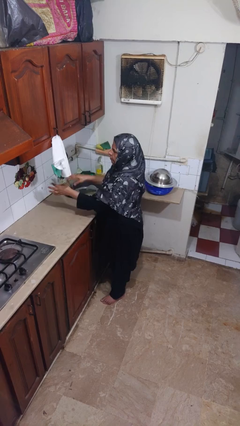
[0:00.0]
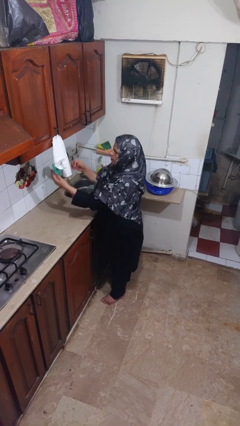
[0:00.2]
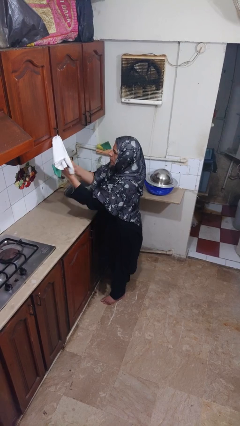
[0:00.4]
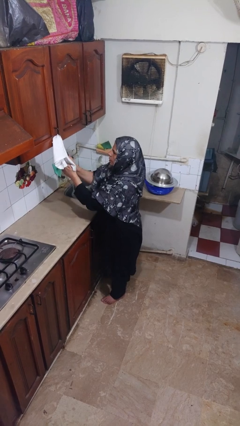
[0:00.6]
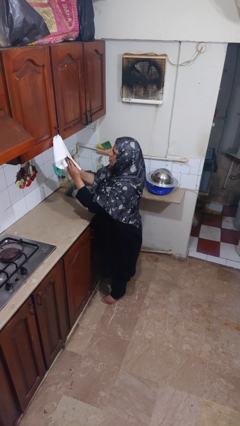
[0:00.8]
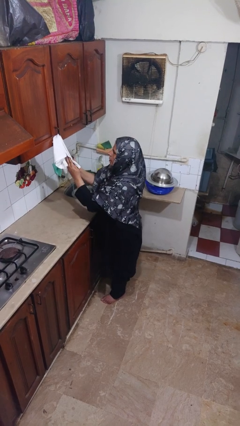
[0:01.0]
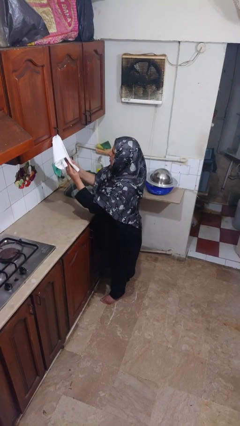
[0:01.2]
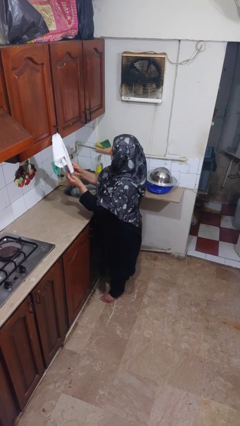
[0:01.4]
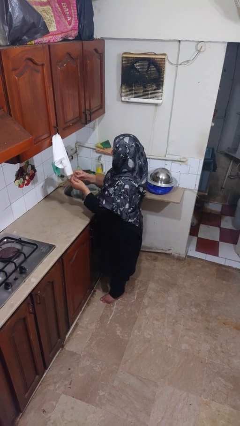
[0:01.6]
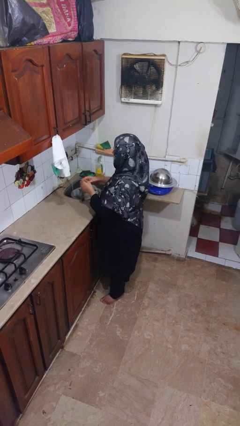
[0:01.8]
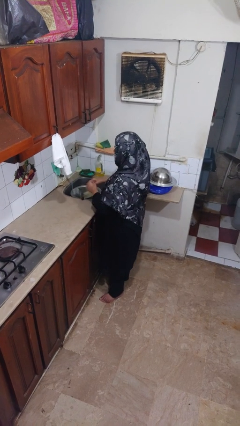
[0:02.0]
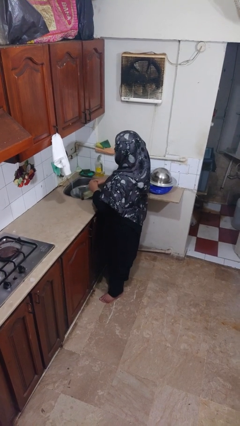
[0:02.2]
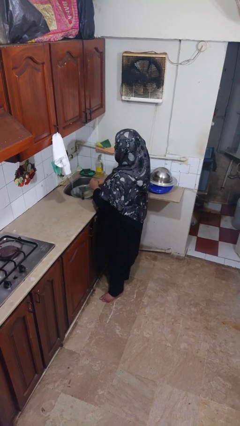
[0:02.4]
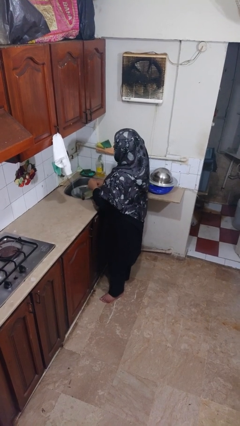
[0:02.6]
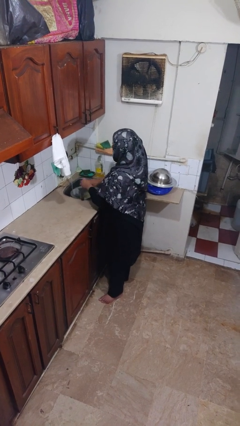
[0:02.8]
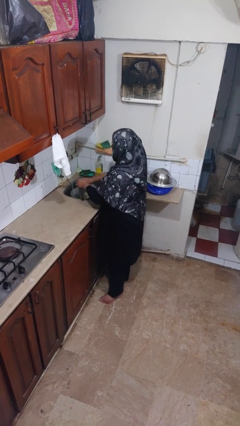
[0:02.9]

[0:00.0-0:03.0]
person dries hands with towel

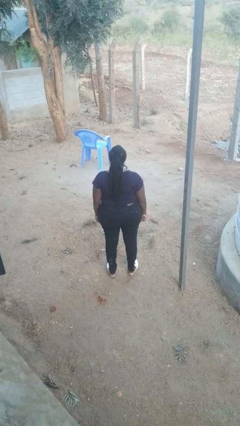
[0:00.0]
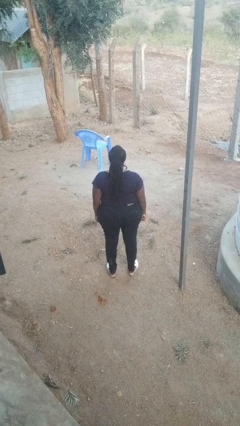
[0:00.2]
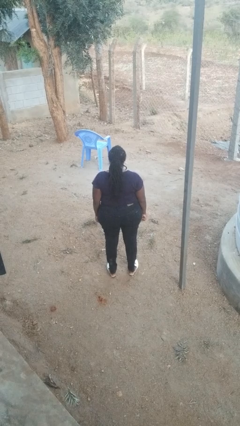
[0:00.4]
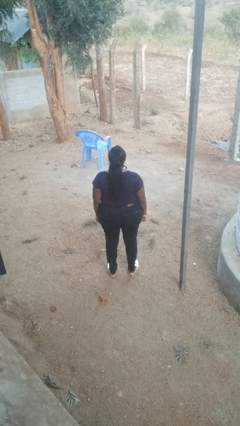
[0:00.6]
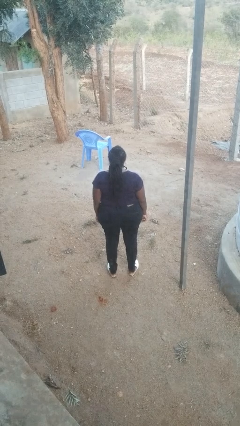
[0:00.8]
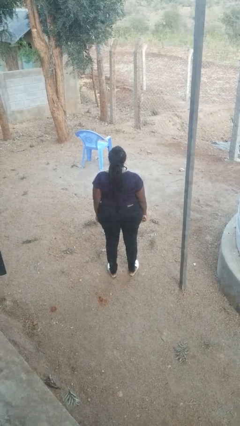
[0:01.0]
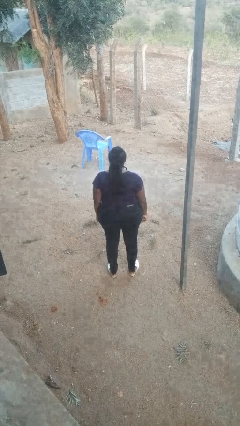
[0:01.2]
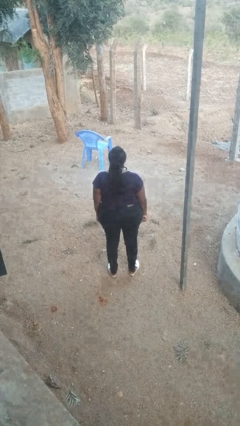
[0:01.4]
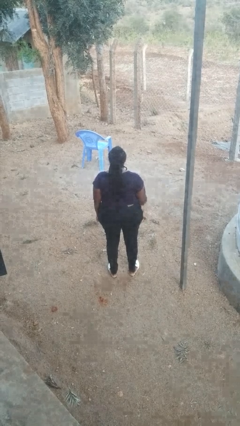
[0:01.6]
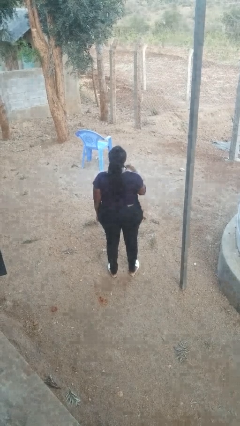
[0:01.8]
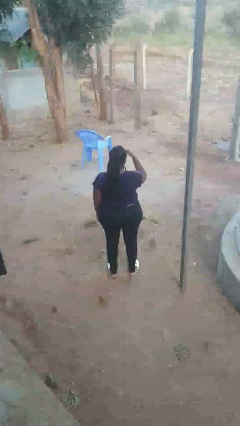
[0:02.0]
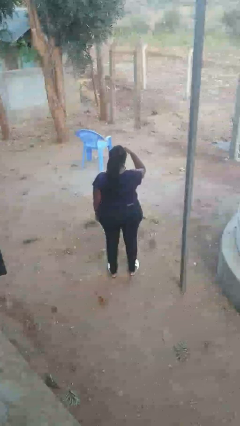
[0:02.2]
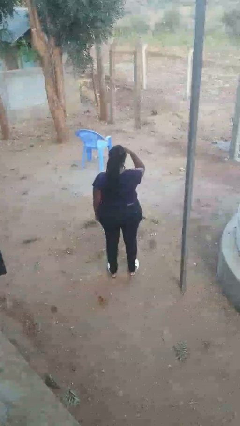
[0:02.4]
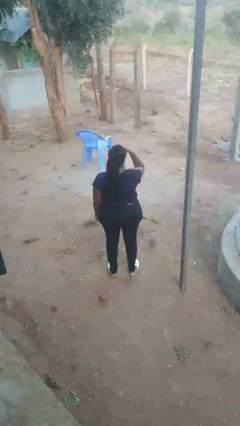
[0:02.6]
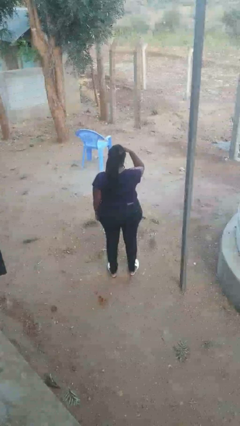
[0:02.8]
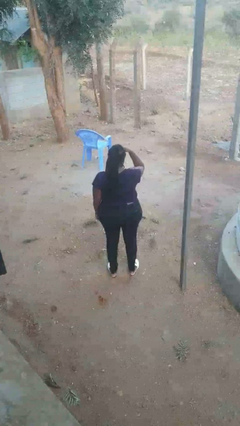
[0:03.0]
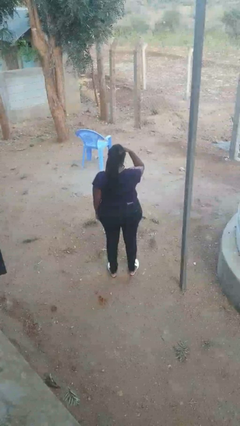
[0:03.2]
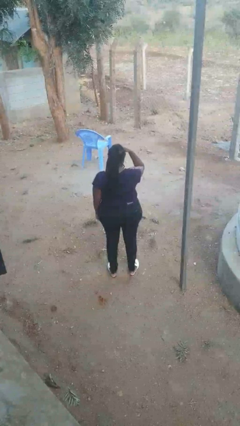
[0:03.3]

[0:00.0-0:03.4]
person shades eyes

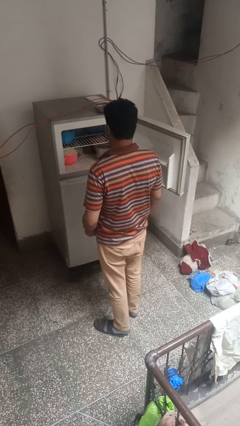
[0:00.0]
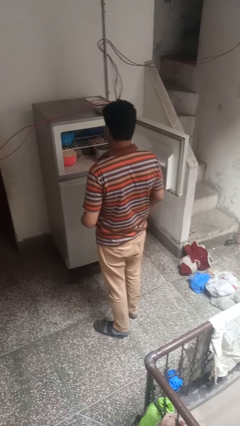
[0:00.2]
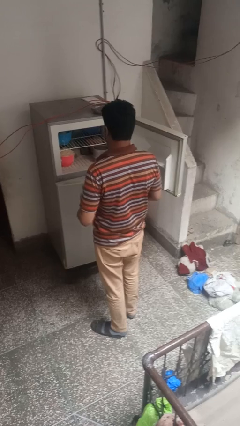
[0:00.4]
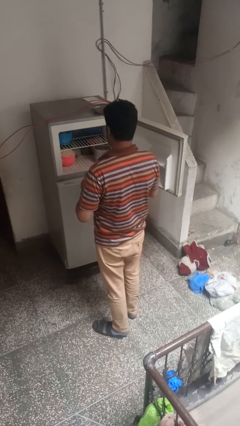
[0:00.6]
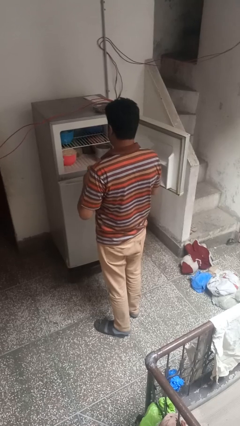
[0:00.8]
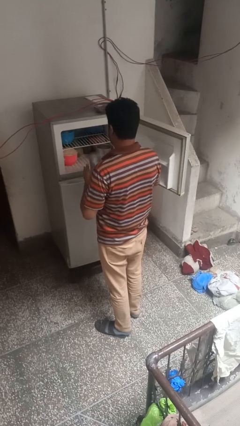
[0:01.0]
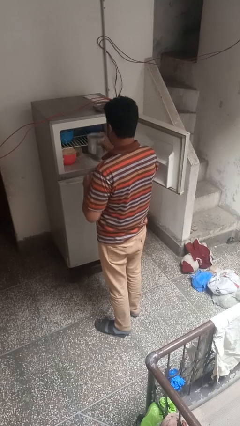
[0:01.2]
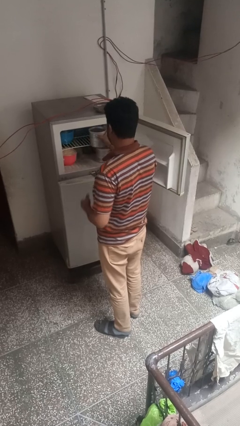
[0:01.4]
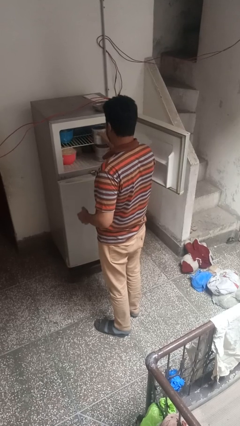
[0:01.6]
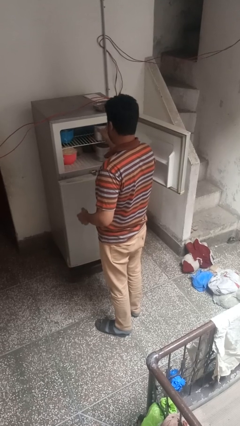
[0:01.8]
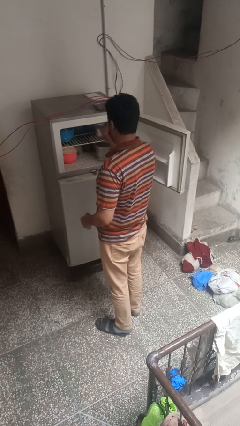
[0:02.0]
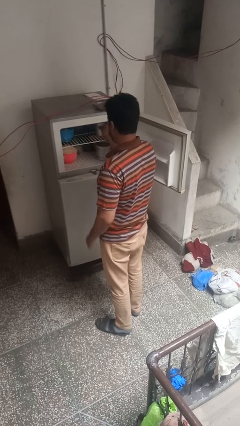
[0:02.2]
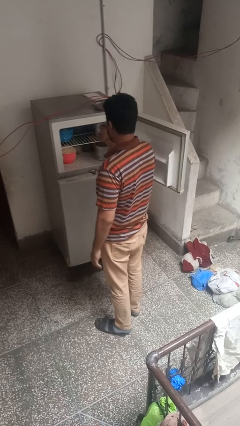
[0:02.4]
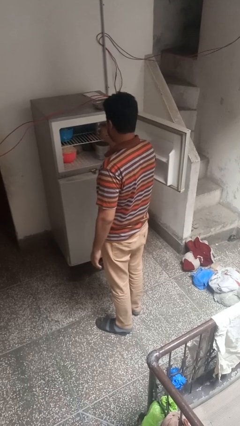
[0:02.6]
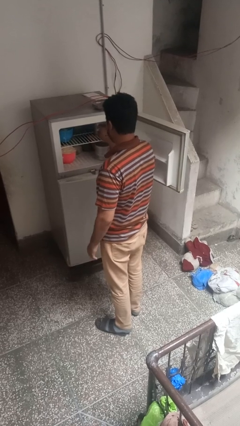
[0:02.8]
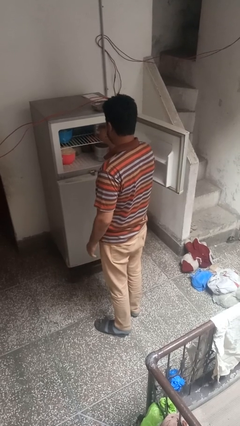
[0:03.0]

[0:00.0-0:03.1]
person puts object into refrigerator

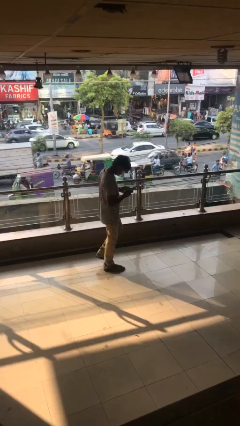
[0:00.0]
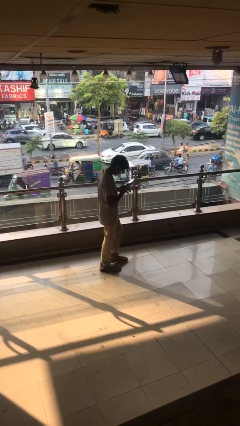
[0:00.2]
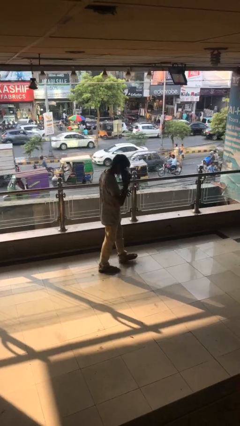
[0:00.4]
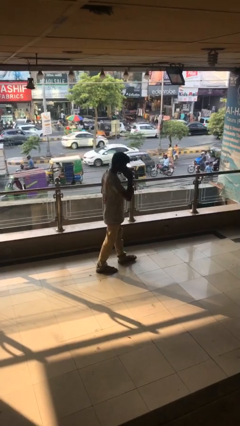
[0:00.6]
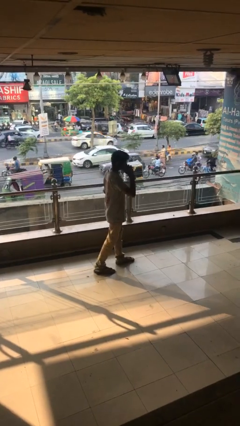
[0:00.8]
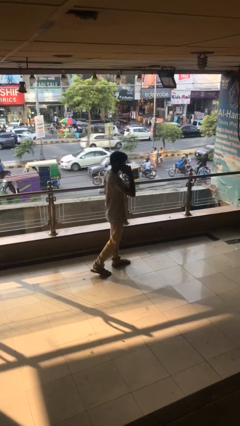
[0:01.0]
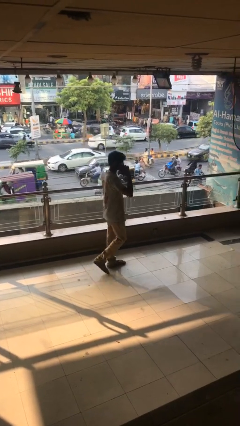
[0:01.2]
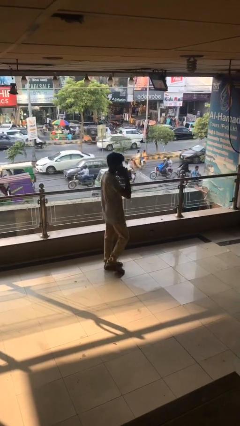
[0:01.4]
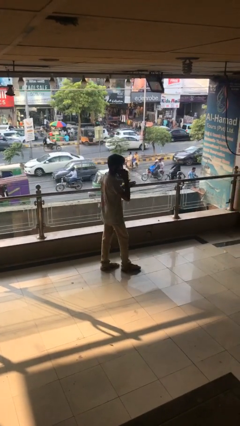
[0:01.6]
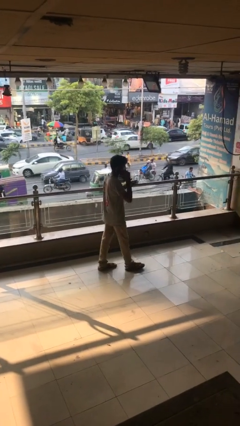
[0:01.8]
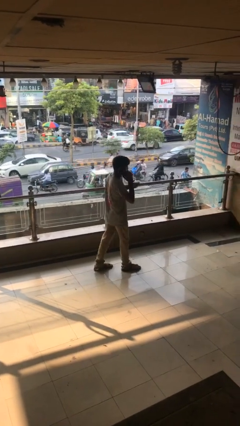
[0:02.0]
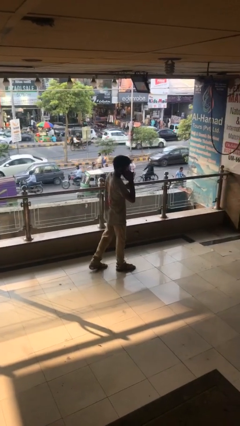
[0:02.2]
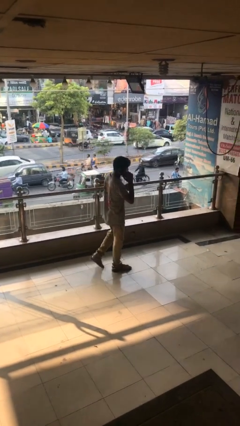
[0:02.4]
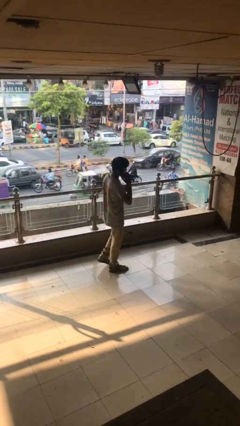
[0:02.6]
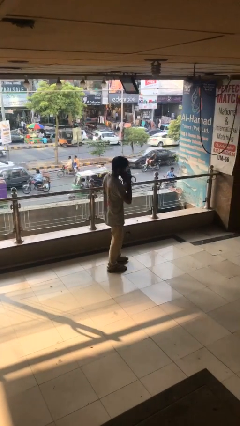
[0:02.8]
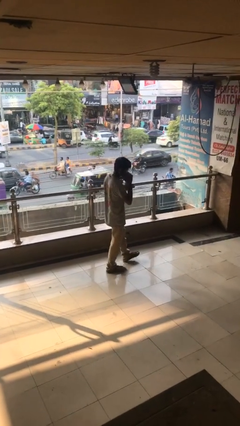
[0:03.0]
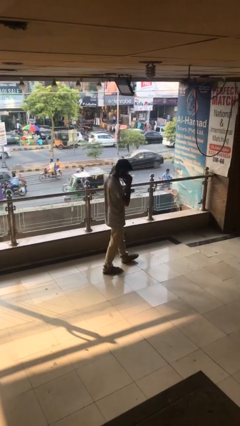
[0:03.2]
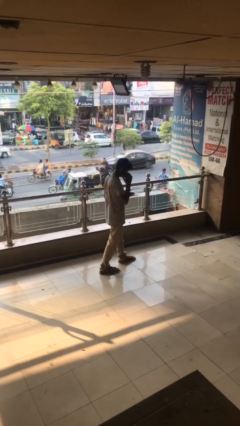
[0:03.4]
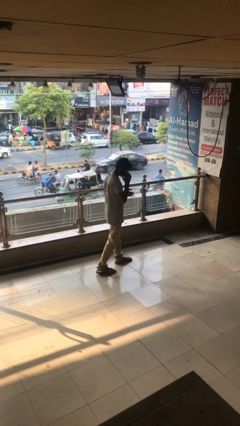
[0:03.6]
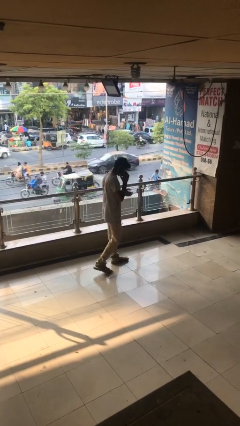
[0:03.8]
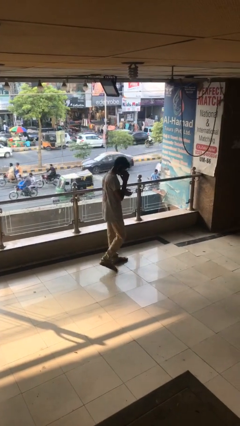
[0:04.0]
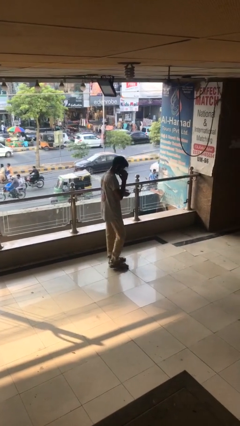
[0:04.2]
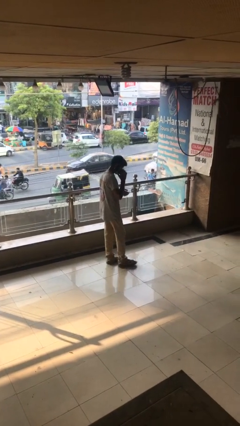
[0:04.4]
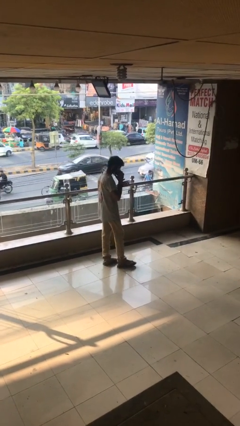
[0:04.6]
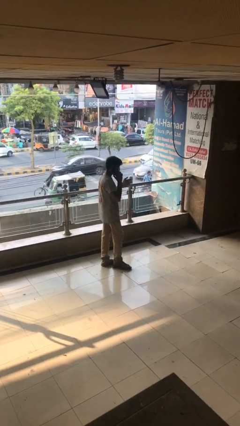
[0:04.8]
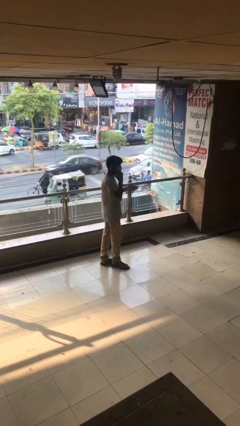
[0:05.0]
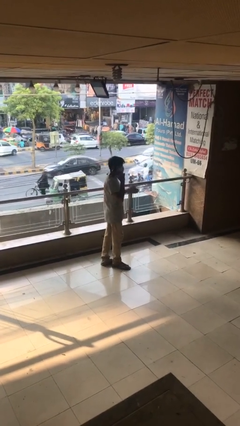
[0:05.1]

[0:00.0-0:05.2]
person talks on phone

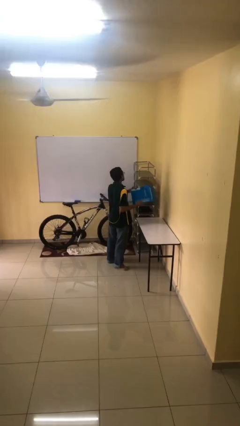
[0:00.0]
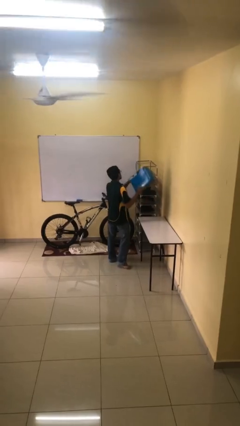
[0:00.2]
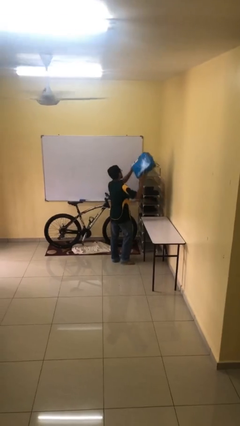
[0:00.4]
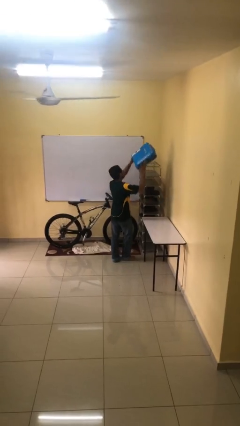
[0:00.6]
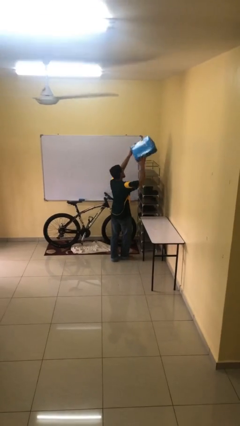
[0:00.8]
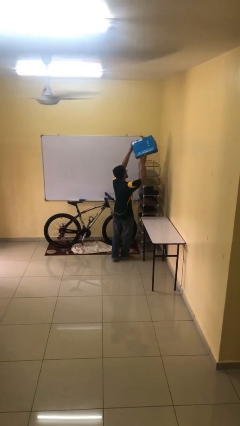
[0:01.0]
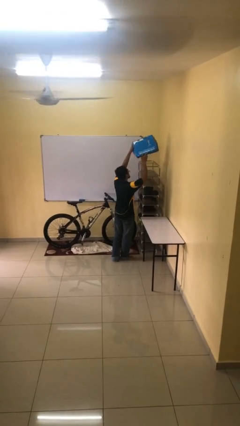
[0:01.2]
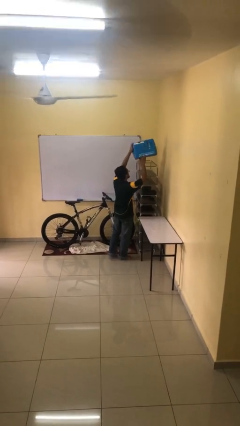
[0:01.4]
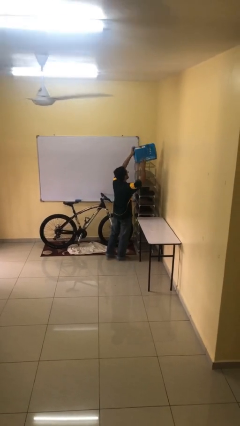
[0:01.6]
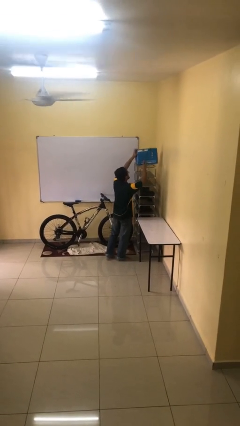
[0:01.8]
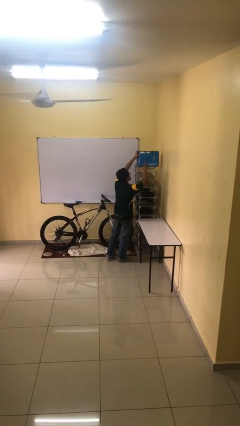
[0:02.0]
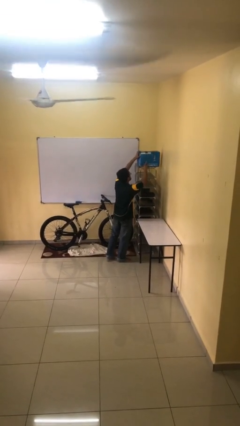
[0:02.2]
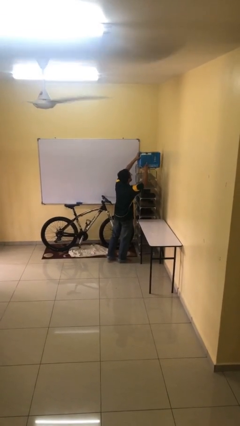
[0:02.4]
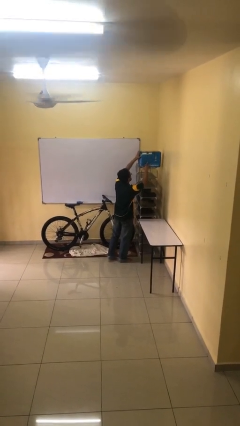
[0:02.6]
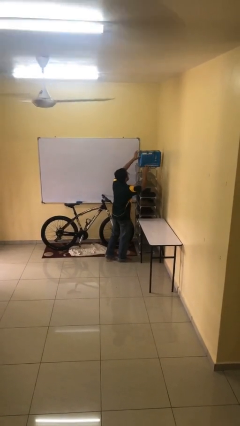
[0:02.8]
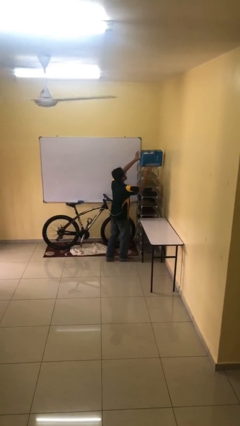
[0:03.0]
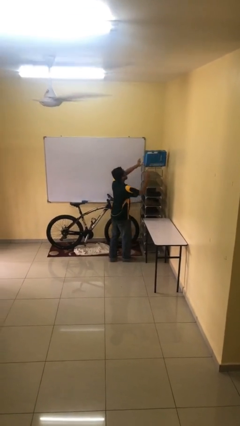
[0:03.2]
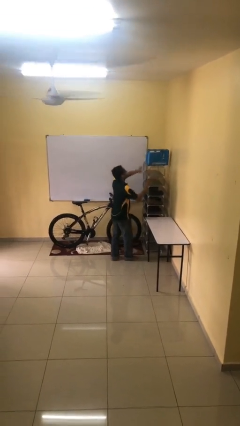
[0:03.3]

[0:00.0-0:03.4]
person puts down object on shelf
